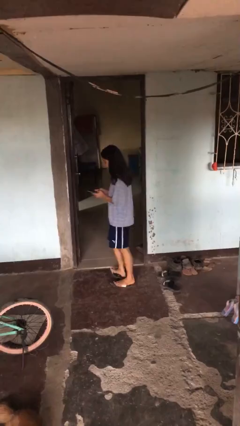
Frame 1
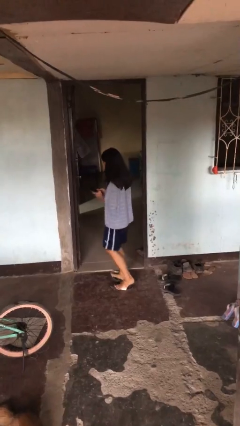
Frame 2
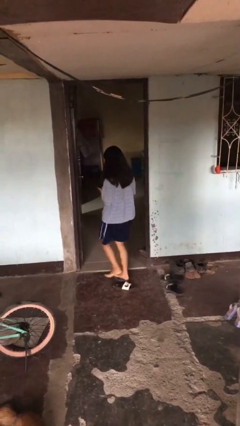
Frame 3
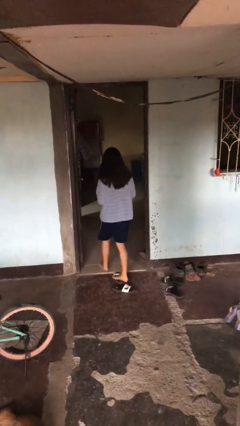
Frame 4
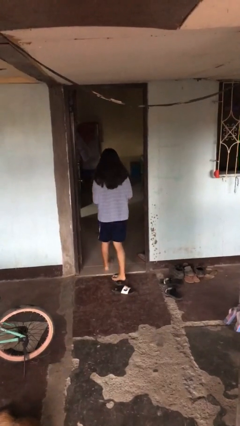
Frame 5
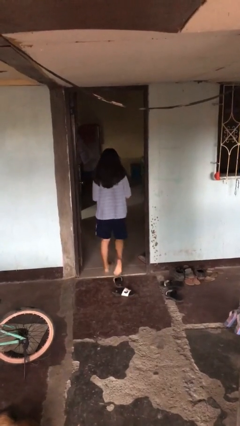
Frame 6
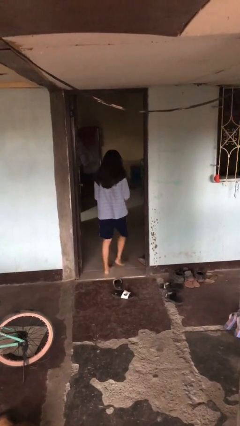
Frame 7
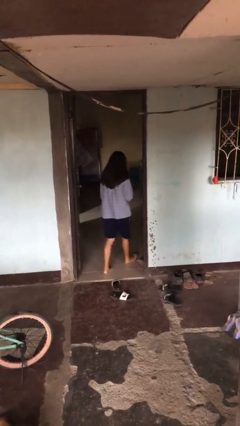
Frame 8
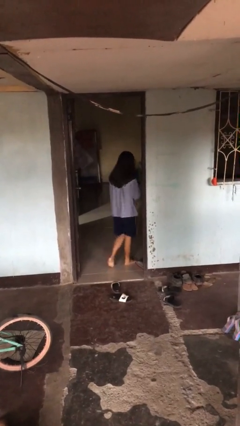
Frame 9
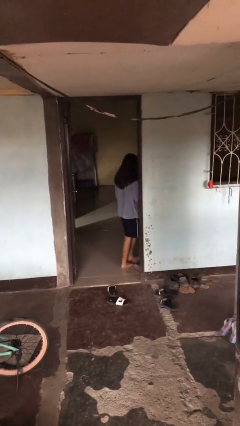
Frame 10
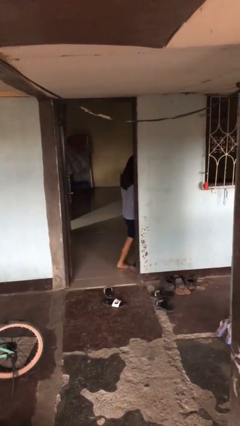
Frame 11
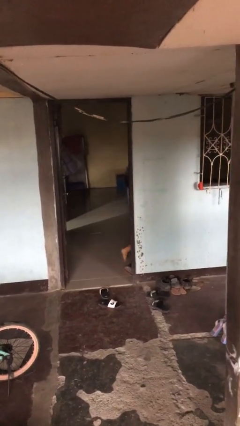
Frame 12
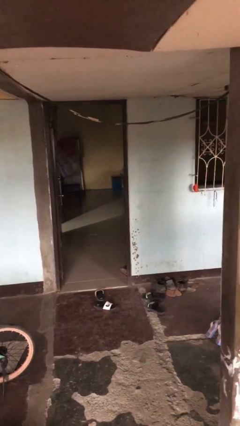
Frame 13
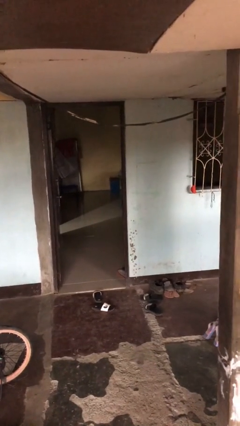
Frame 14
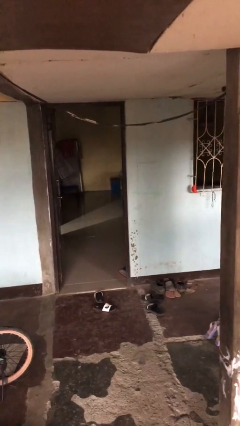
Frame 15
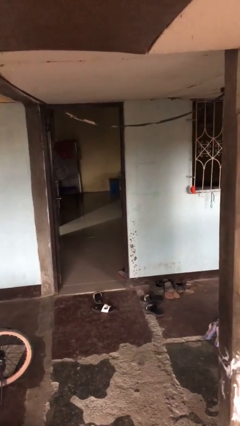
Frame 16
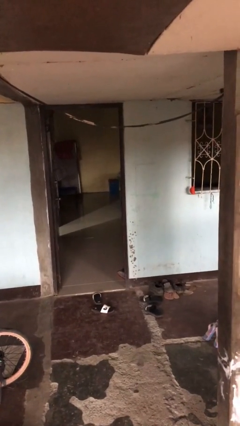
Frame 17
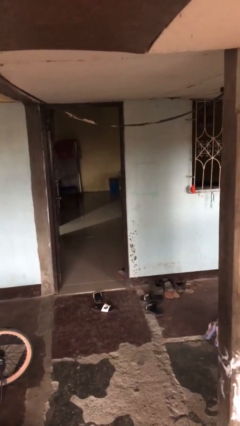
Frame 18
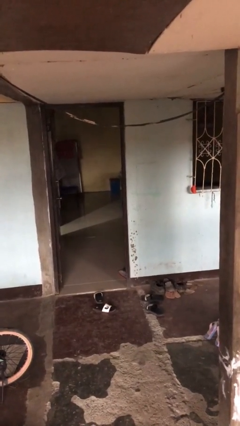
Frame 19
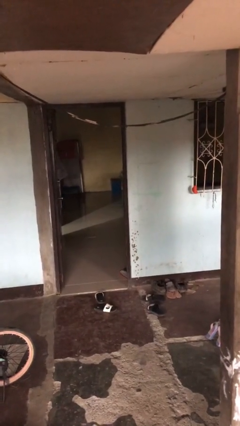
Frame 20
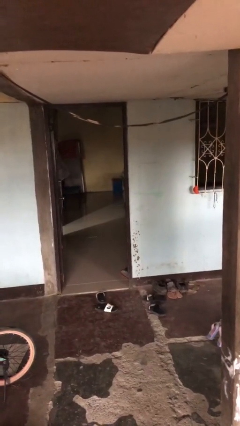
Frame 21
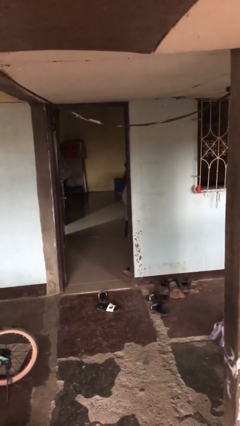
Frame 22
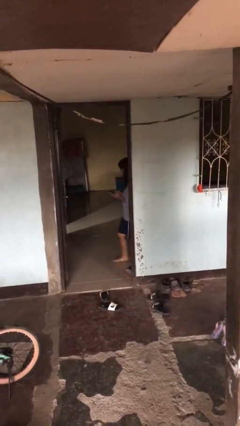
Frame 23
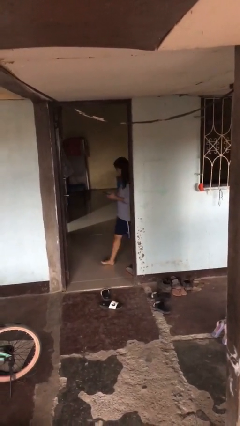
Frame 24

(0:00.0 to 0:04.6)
person exits scene through structure

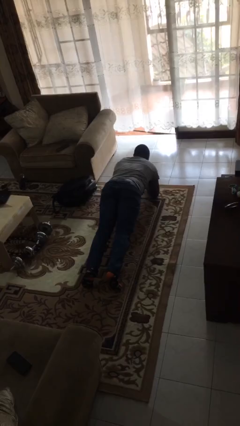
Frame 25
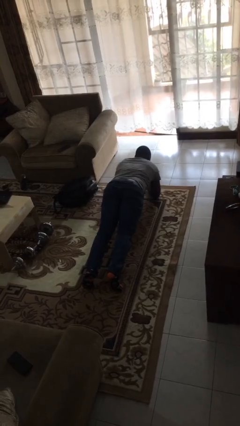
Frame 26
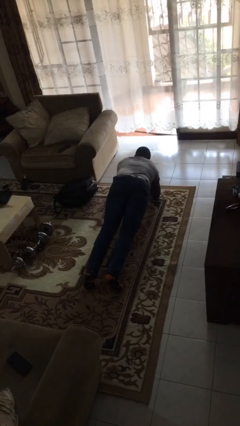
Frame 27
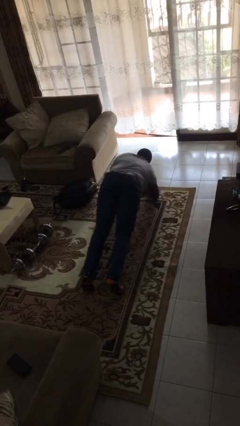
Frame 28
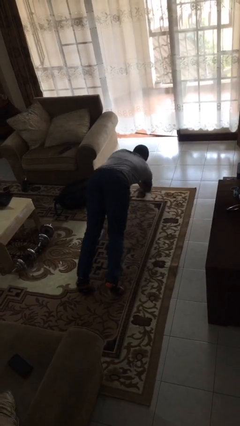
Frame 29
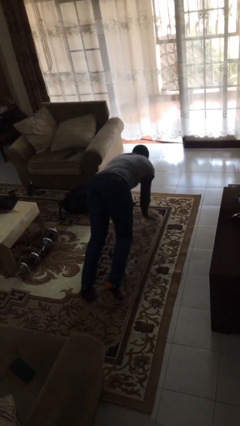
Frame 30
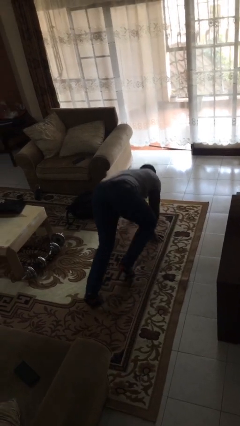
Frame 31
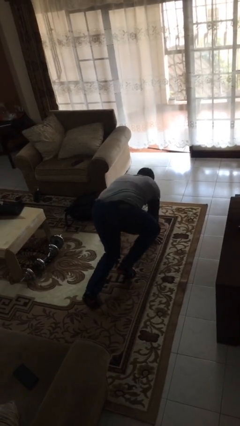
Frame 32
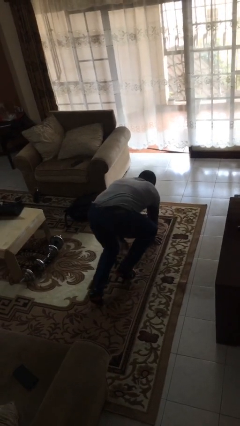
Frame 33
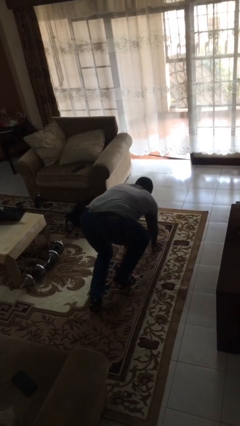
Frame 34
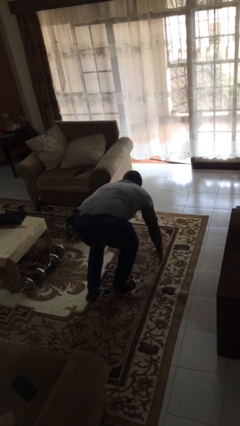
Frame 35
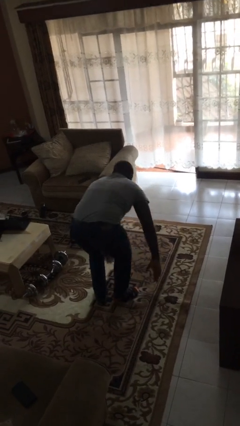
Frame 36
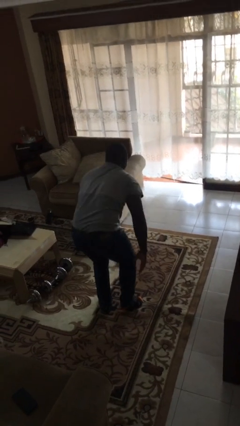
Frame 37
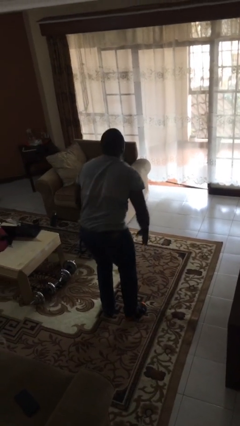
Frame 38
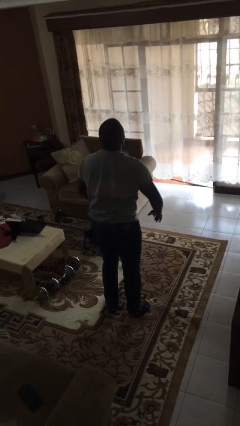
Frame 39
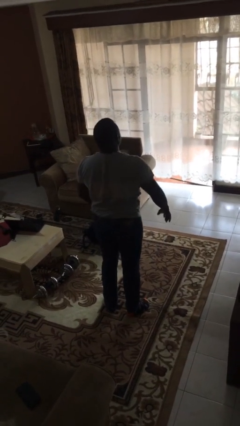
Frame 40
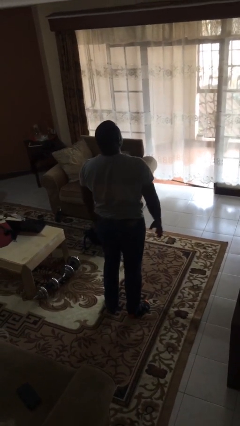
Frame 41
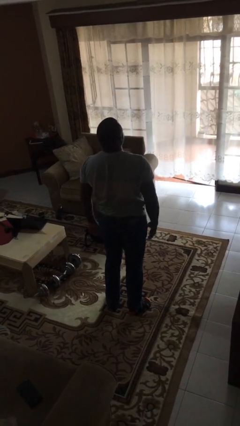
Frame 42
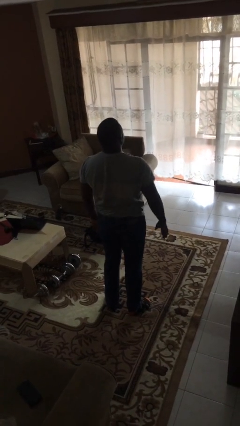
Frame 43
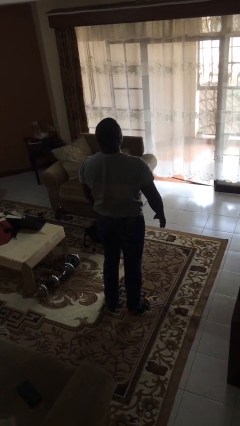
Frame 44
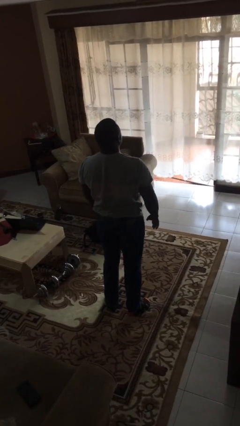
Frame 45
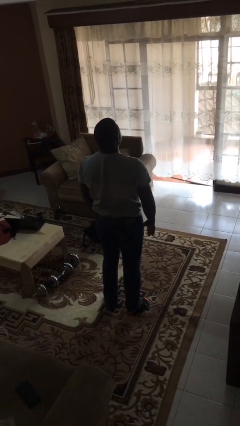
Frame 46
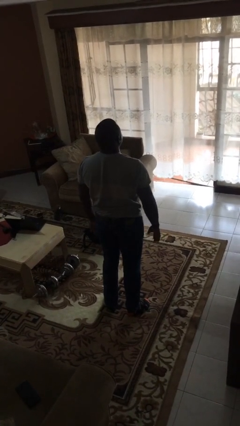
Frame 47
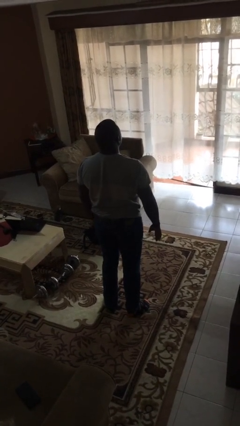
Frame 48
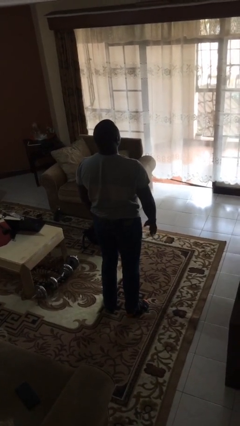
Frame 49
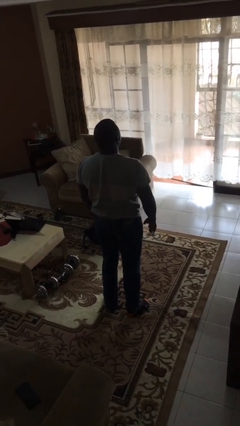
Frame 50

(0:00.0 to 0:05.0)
person stands up from floor

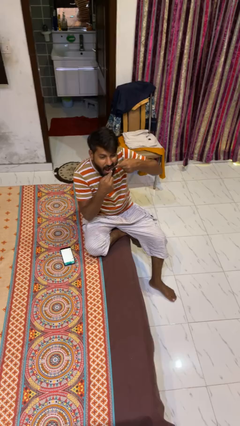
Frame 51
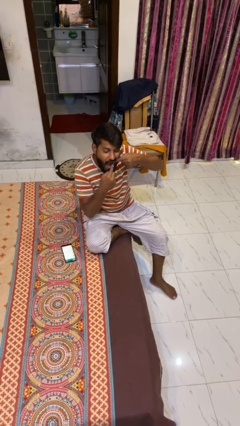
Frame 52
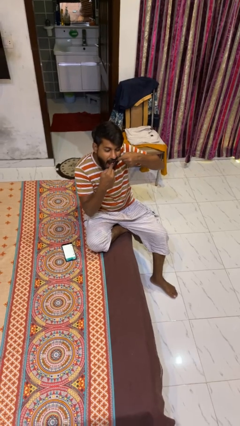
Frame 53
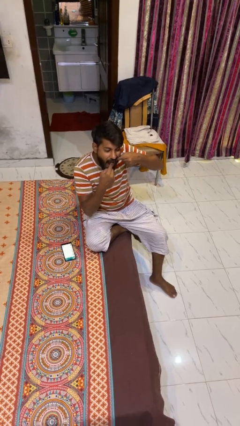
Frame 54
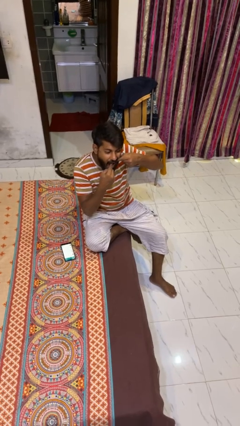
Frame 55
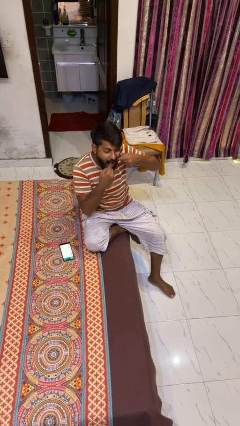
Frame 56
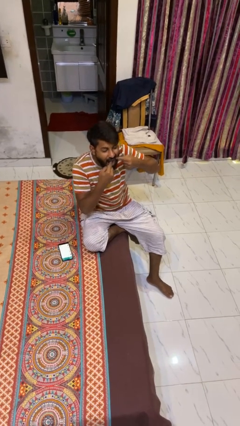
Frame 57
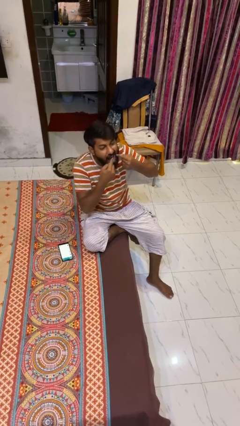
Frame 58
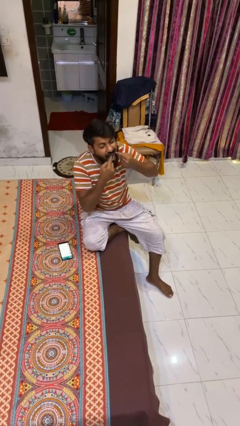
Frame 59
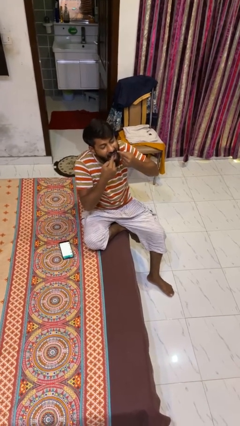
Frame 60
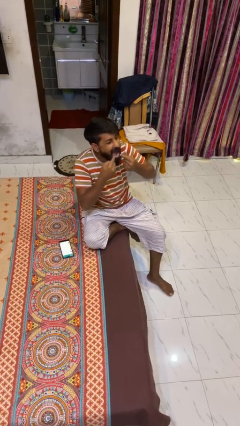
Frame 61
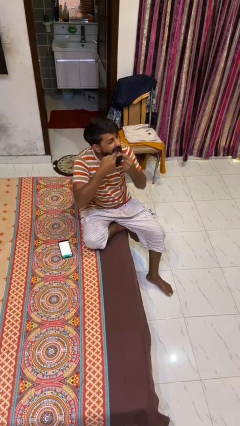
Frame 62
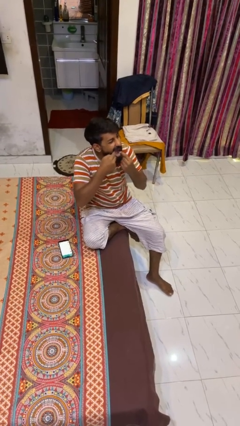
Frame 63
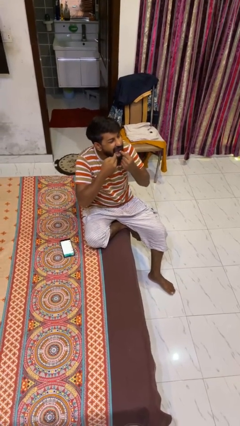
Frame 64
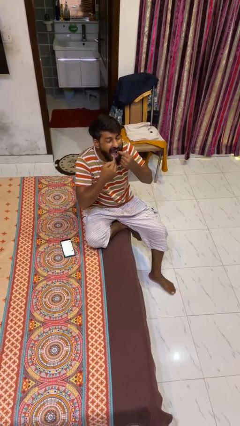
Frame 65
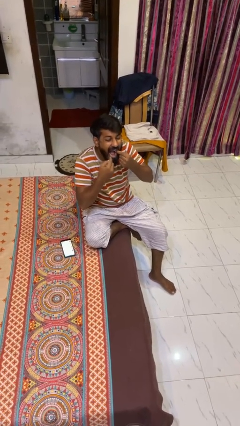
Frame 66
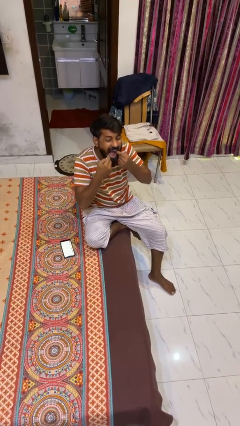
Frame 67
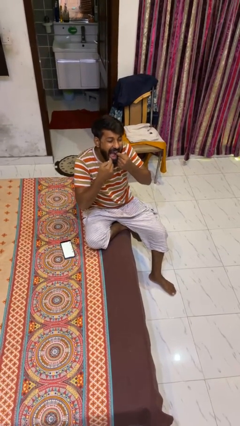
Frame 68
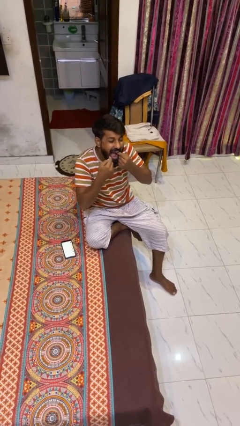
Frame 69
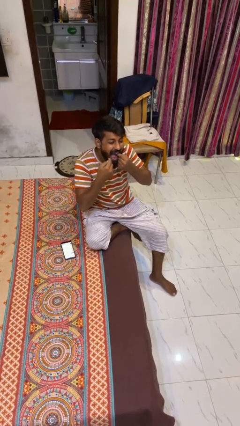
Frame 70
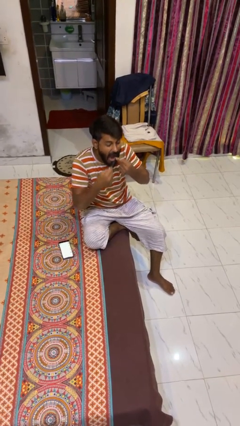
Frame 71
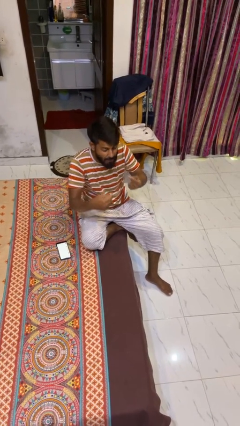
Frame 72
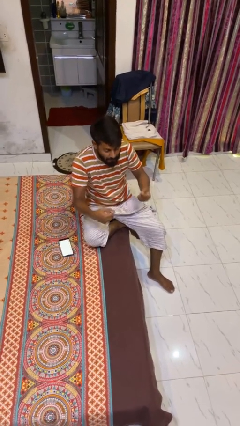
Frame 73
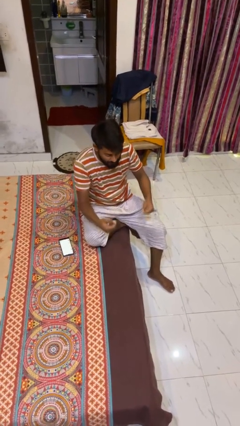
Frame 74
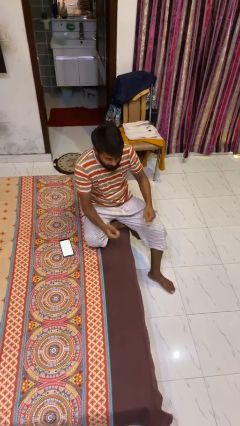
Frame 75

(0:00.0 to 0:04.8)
person flosses

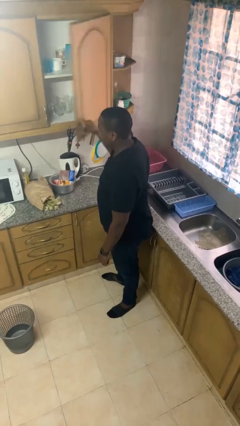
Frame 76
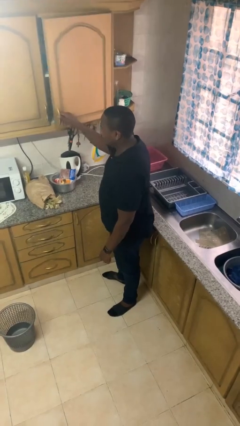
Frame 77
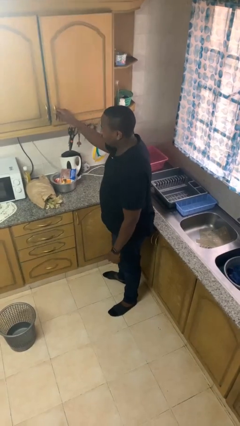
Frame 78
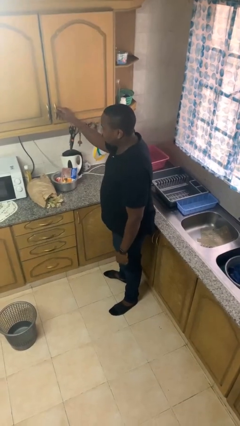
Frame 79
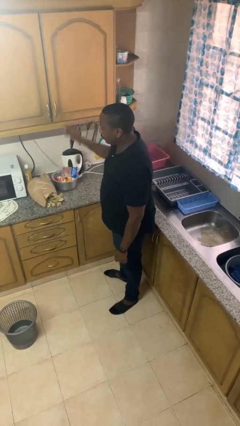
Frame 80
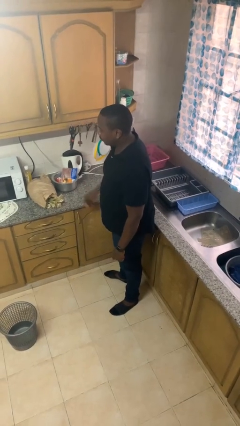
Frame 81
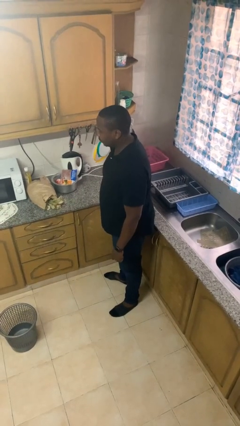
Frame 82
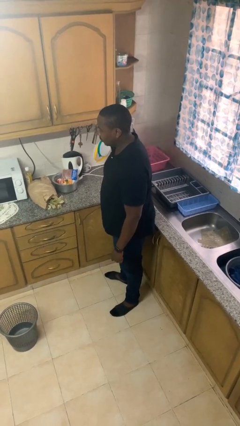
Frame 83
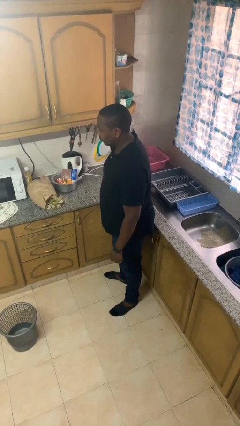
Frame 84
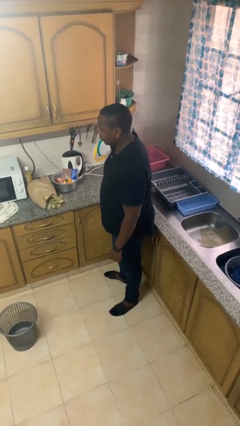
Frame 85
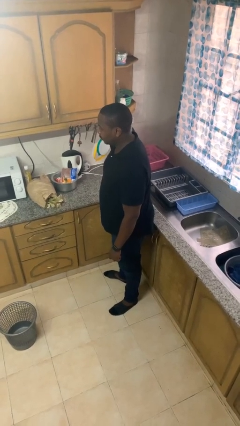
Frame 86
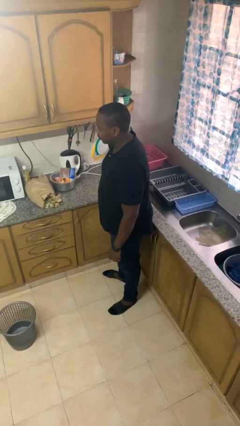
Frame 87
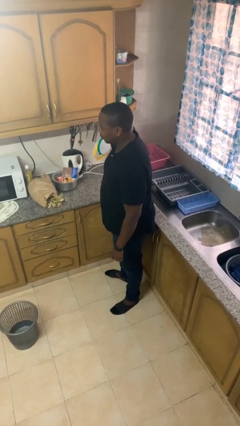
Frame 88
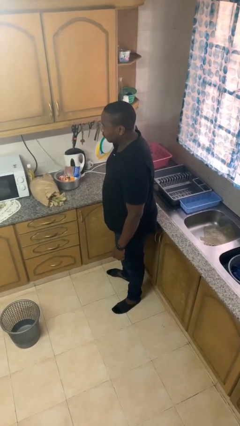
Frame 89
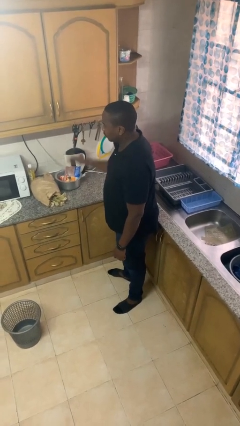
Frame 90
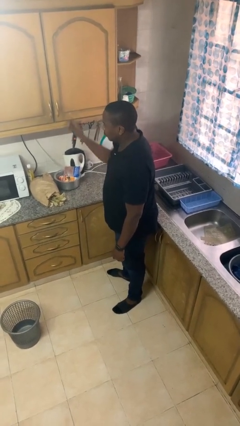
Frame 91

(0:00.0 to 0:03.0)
person closes cabinet
